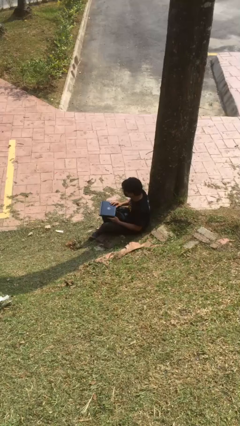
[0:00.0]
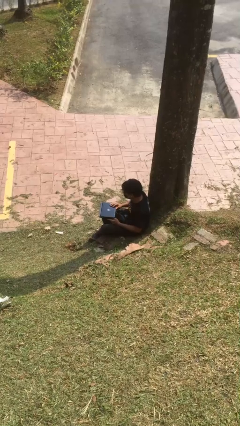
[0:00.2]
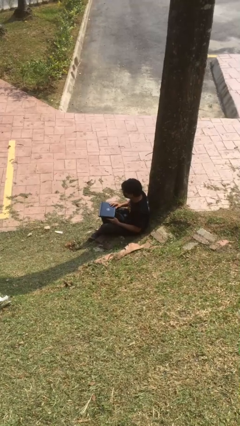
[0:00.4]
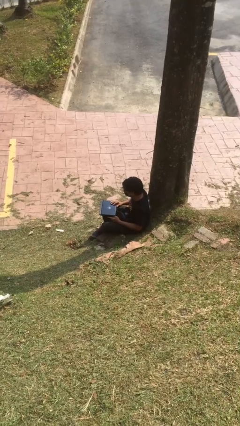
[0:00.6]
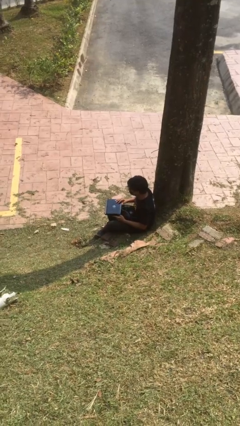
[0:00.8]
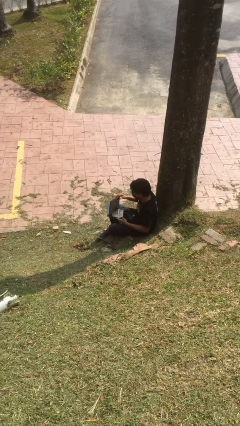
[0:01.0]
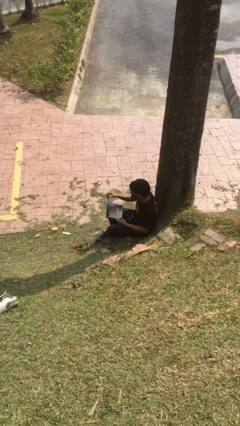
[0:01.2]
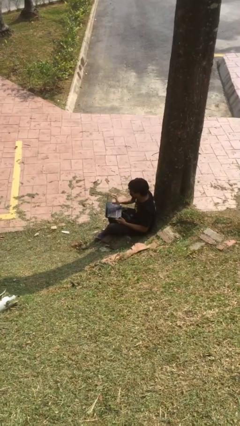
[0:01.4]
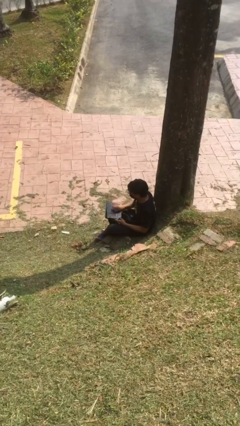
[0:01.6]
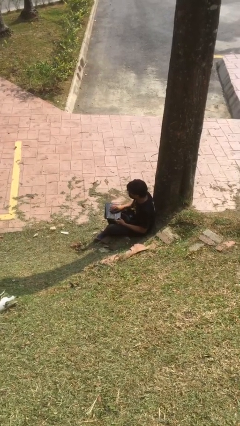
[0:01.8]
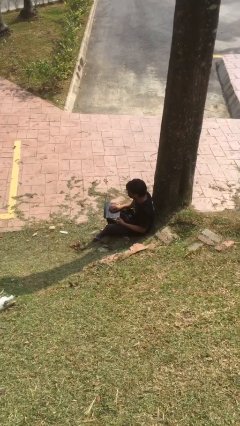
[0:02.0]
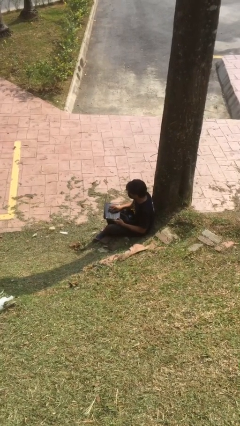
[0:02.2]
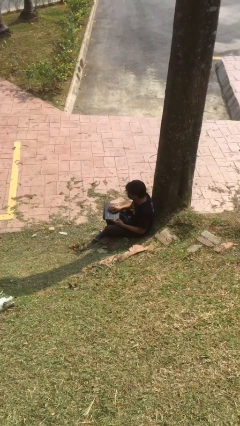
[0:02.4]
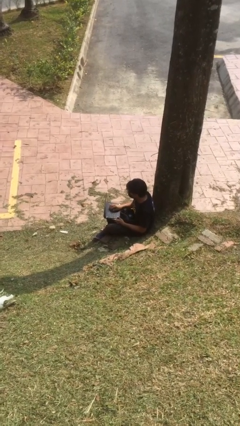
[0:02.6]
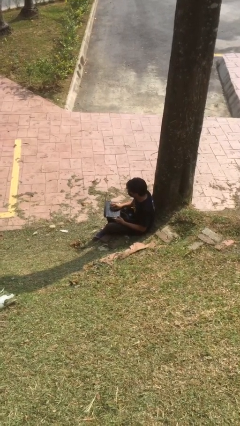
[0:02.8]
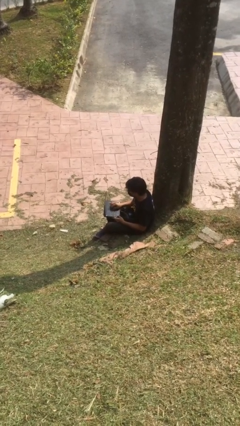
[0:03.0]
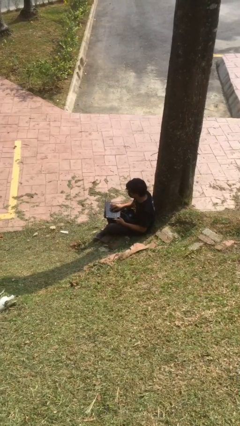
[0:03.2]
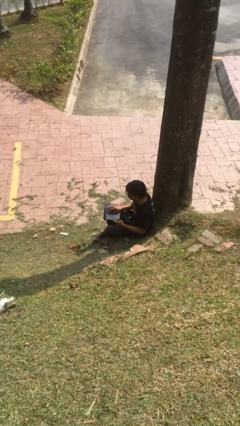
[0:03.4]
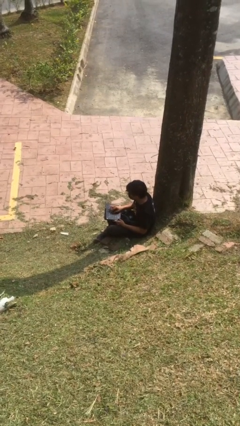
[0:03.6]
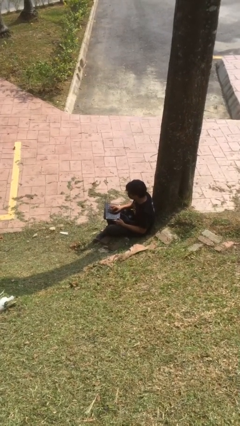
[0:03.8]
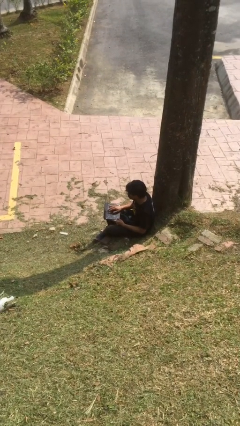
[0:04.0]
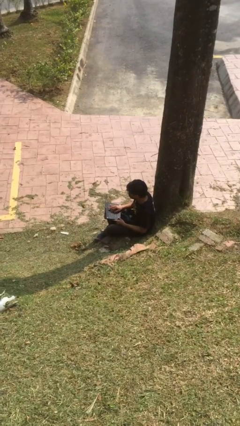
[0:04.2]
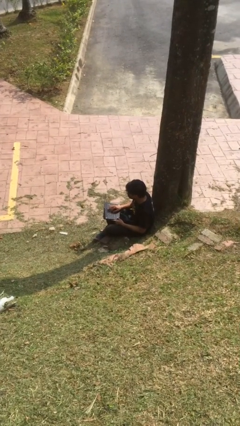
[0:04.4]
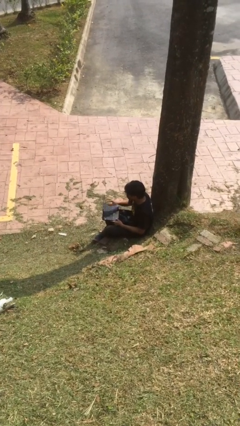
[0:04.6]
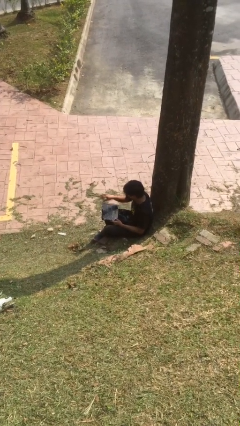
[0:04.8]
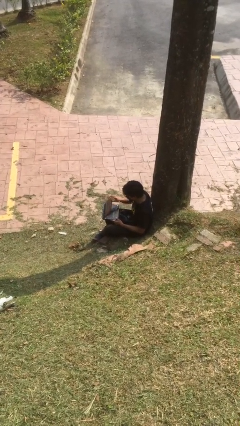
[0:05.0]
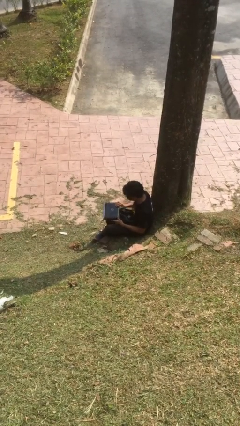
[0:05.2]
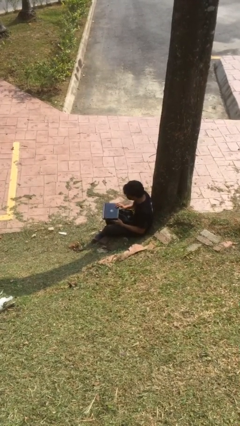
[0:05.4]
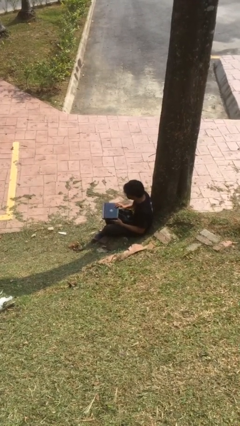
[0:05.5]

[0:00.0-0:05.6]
person interacts with laptop

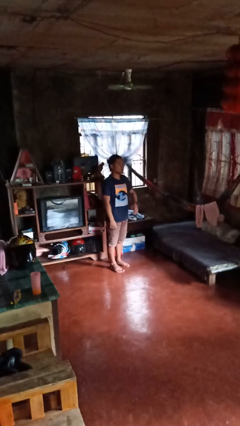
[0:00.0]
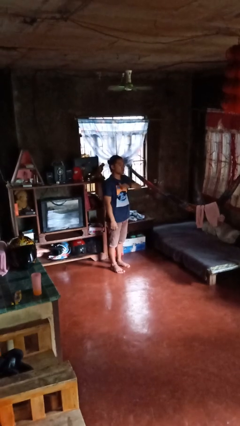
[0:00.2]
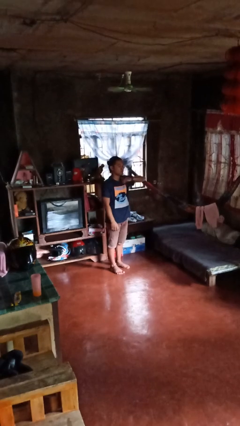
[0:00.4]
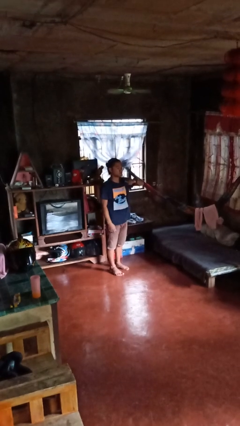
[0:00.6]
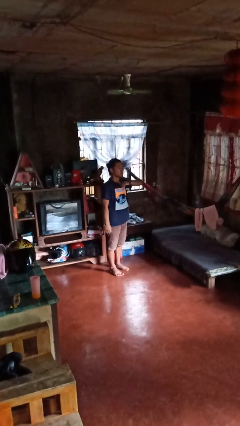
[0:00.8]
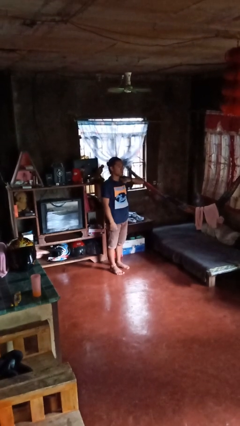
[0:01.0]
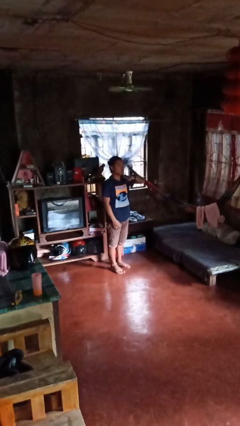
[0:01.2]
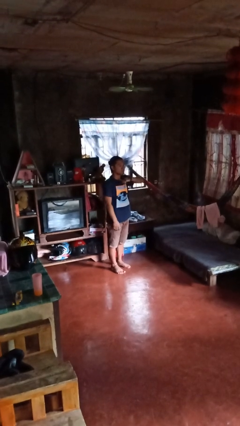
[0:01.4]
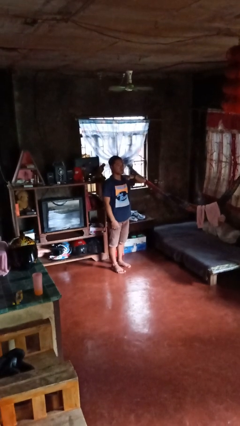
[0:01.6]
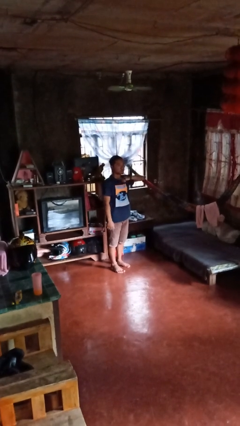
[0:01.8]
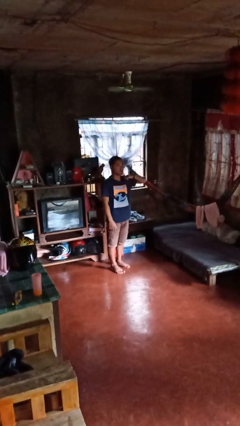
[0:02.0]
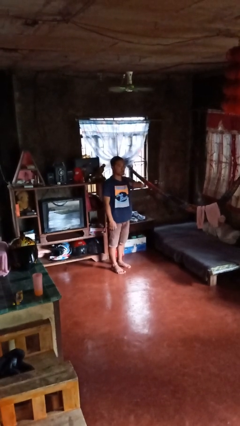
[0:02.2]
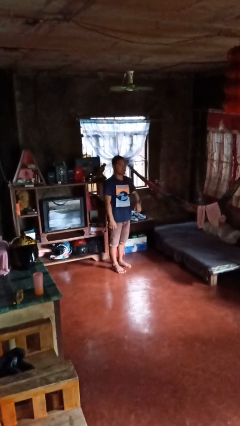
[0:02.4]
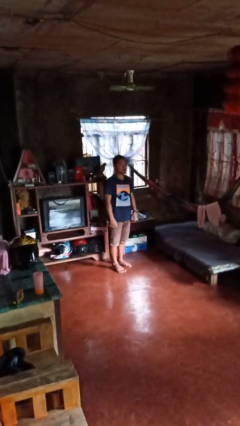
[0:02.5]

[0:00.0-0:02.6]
person gestures cut

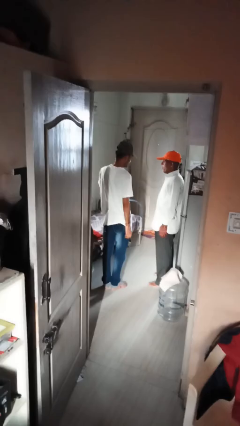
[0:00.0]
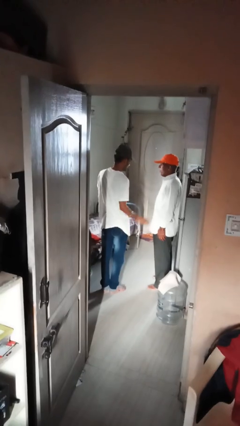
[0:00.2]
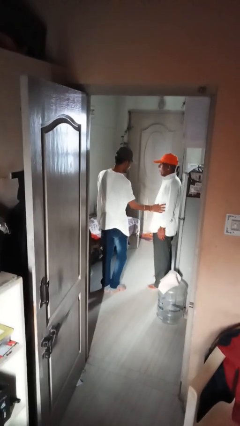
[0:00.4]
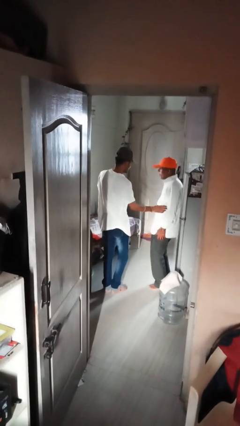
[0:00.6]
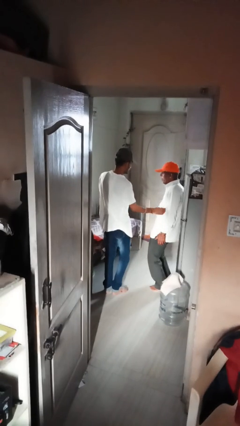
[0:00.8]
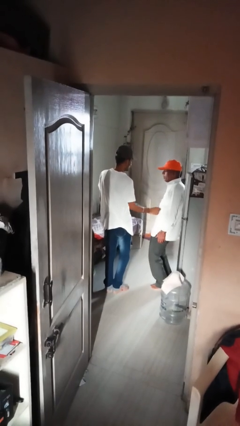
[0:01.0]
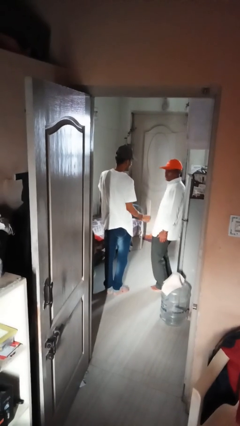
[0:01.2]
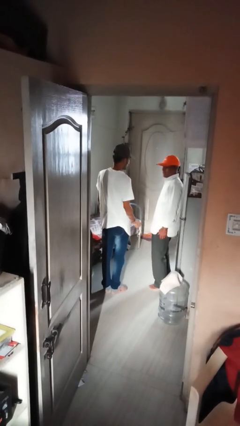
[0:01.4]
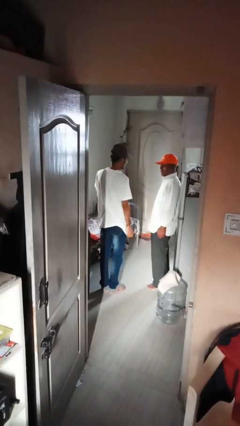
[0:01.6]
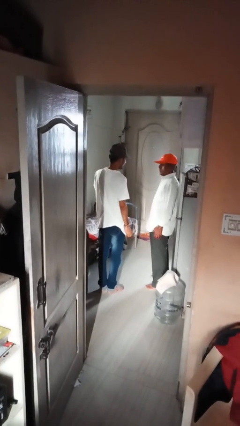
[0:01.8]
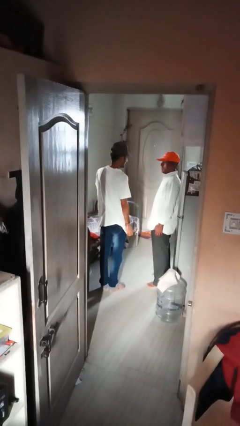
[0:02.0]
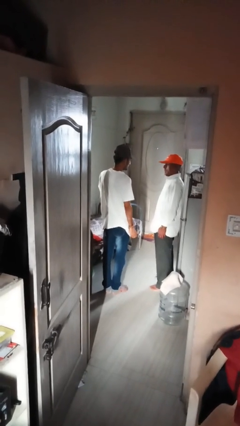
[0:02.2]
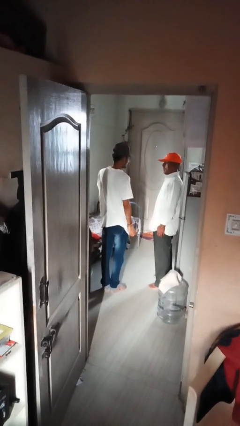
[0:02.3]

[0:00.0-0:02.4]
person tickles person

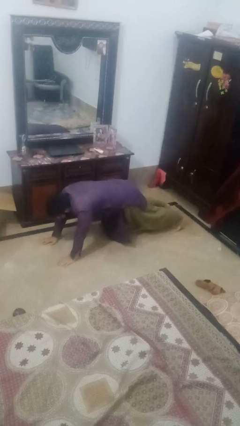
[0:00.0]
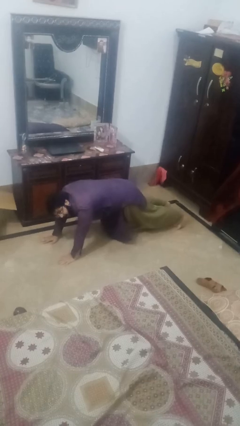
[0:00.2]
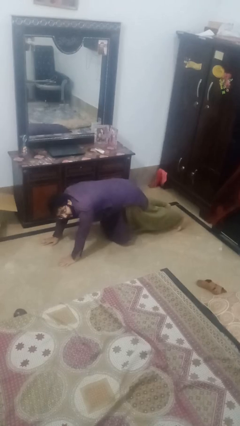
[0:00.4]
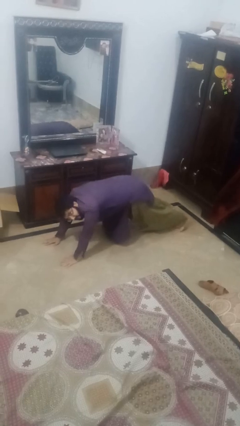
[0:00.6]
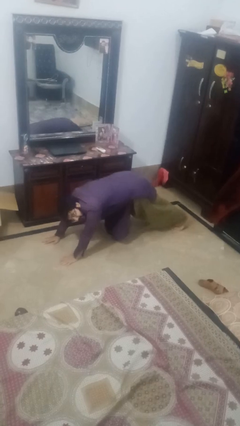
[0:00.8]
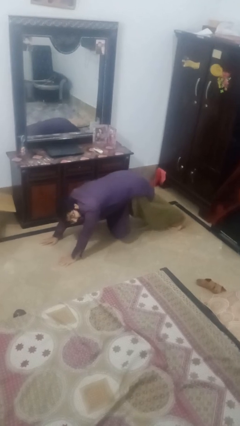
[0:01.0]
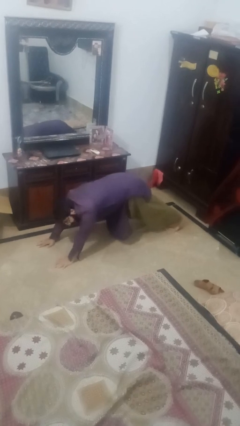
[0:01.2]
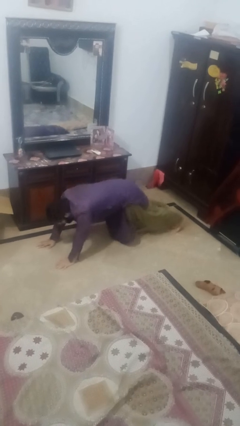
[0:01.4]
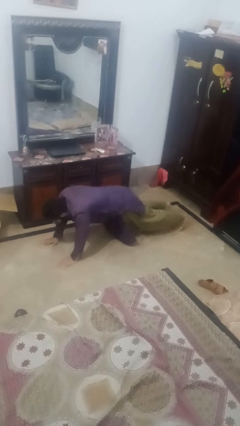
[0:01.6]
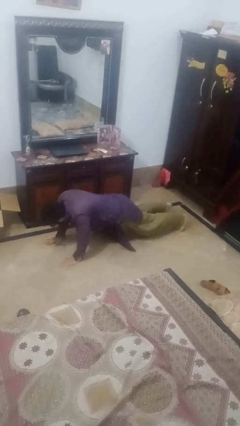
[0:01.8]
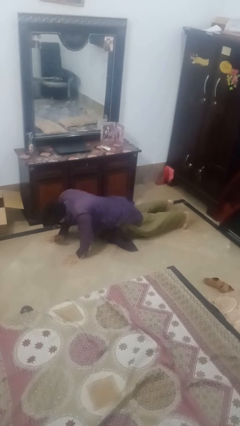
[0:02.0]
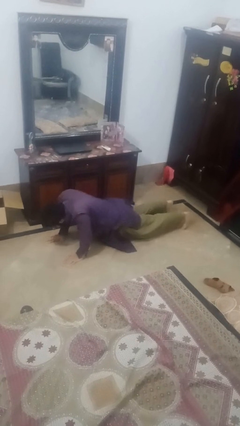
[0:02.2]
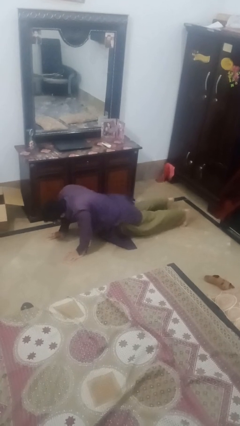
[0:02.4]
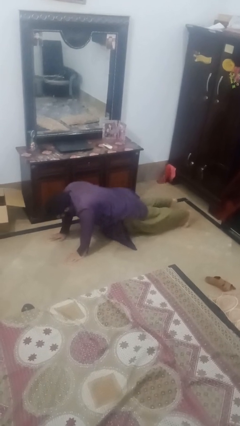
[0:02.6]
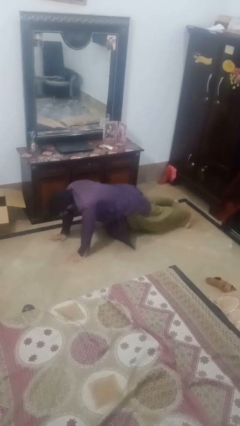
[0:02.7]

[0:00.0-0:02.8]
person exercises with pushup

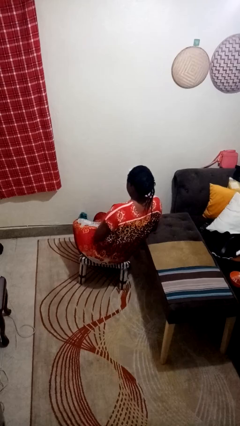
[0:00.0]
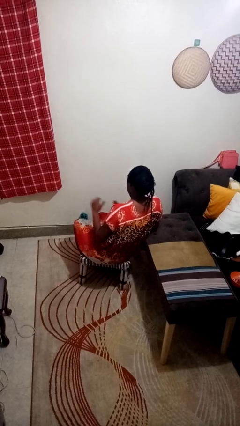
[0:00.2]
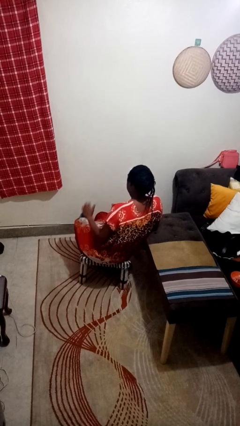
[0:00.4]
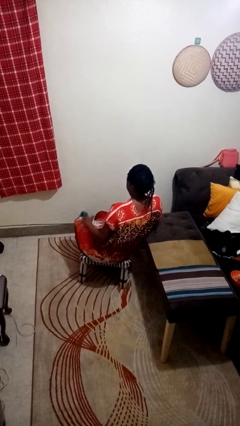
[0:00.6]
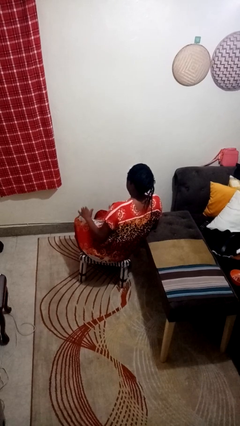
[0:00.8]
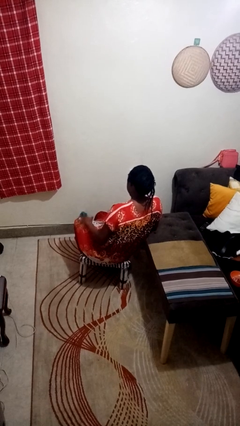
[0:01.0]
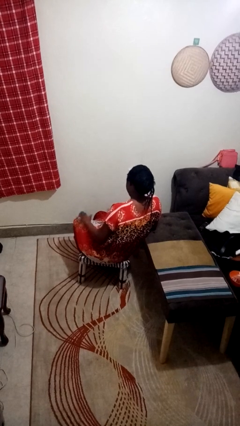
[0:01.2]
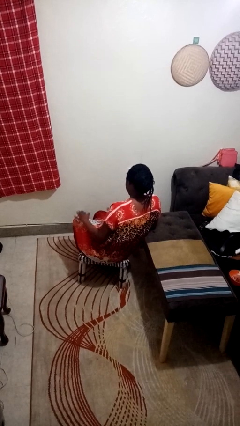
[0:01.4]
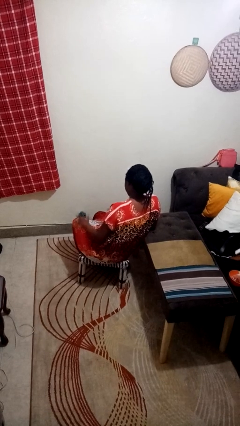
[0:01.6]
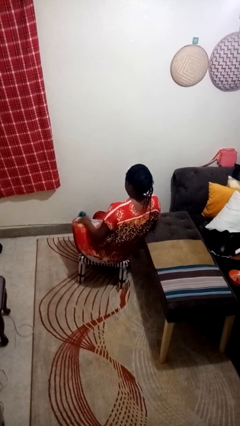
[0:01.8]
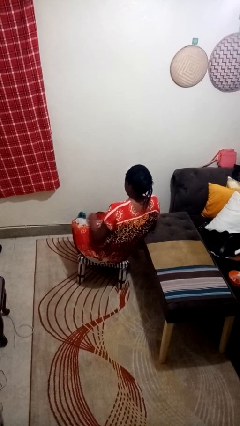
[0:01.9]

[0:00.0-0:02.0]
person slaps hands on thighs

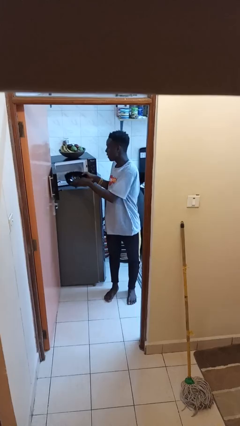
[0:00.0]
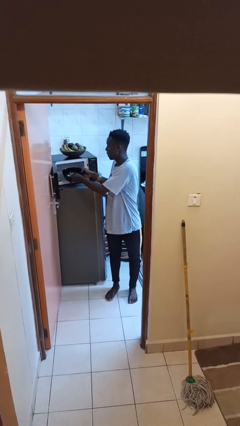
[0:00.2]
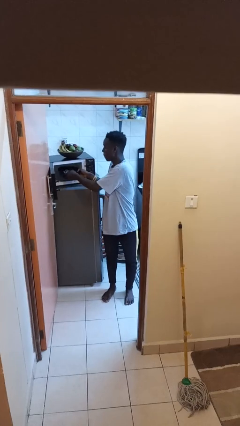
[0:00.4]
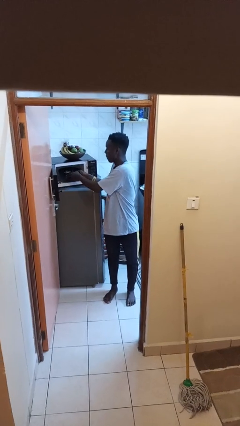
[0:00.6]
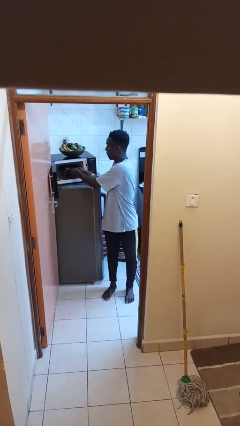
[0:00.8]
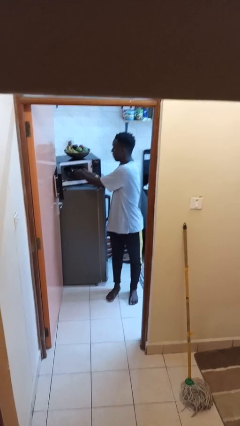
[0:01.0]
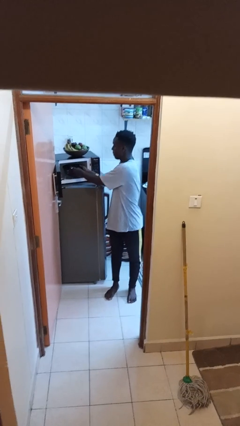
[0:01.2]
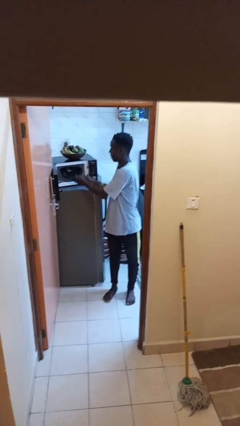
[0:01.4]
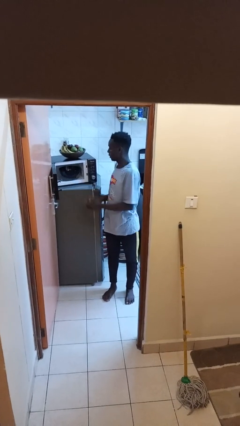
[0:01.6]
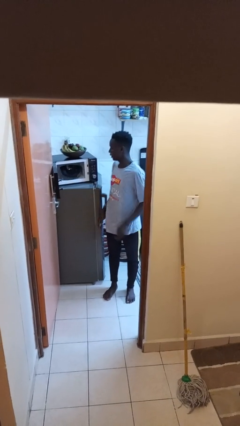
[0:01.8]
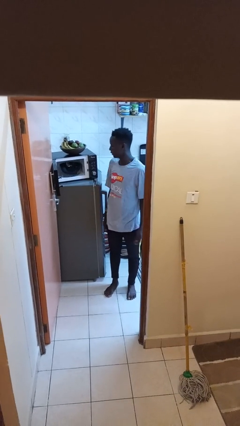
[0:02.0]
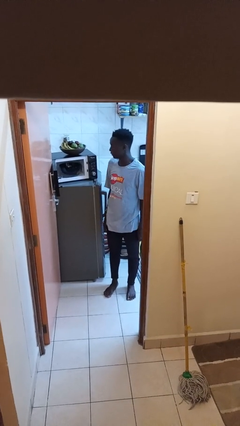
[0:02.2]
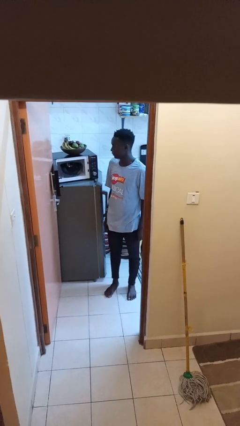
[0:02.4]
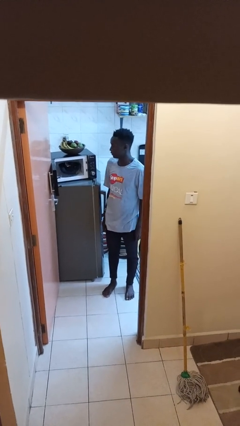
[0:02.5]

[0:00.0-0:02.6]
person puts object into microwave
